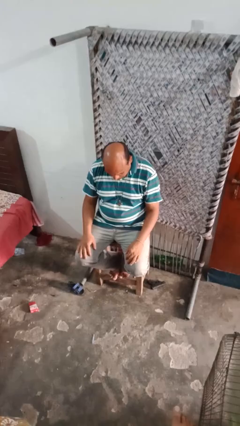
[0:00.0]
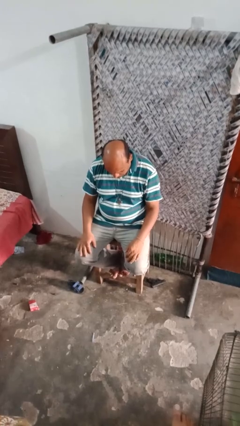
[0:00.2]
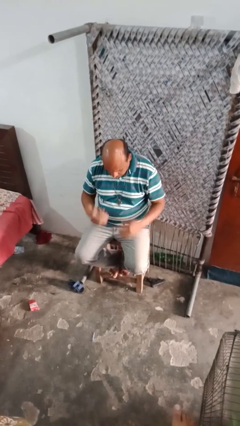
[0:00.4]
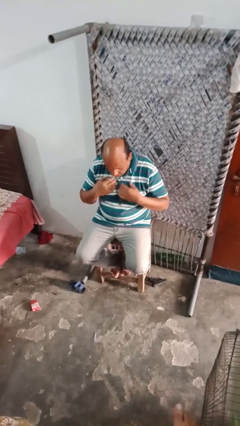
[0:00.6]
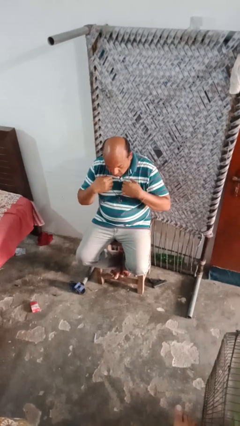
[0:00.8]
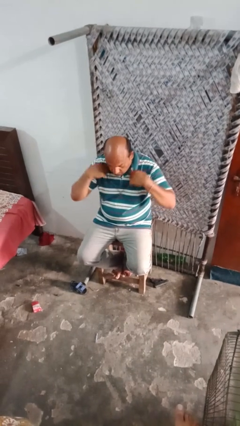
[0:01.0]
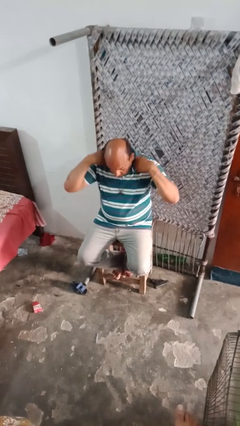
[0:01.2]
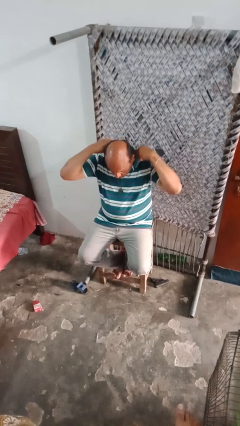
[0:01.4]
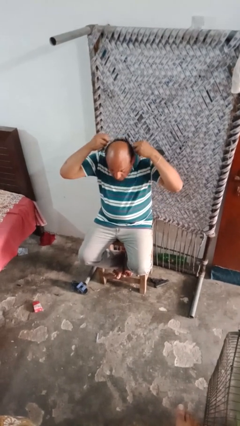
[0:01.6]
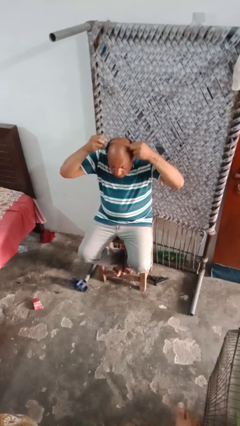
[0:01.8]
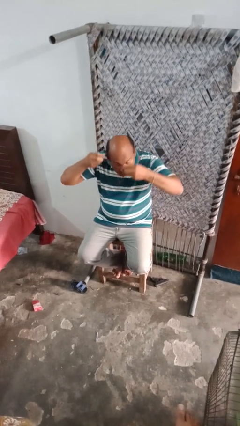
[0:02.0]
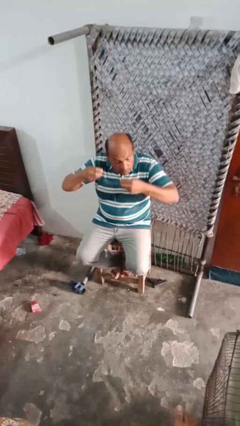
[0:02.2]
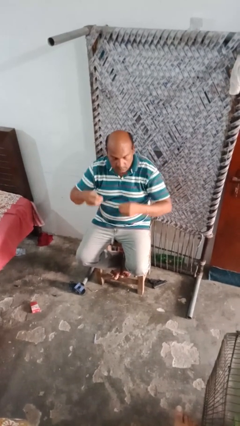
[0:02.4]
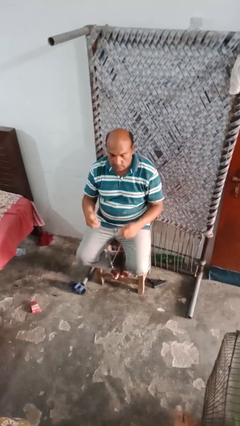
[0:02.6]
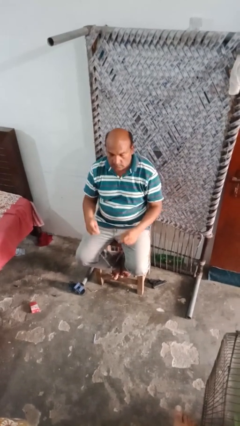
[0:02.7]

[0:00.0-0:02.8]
person takes off necklace

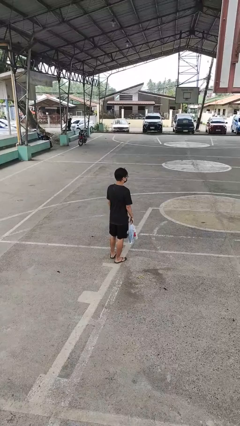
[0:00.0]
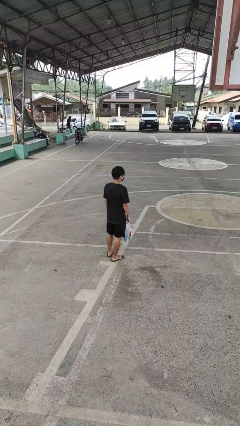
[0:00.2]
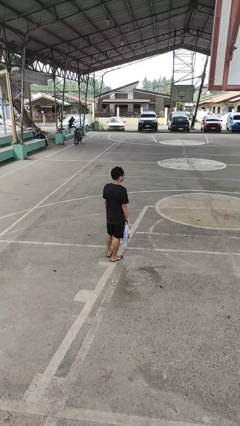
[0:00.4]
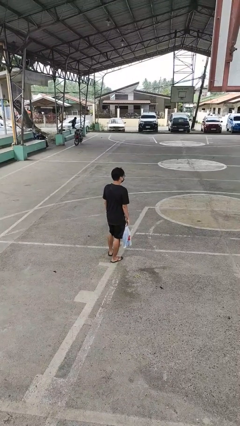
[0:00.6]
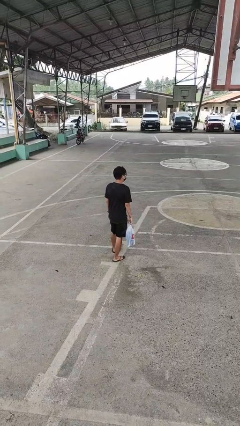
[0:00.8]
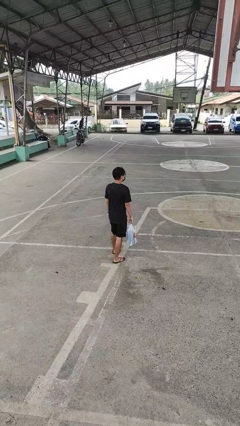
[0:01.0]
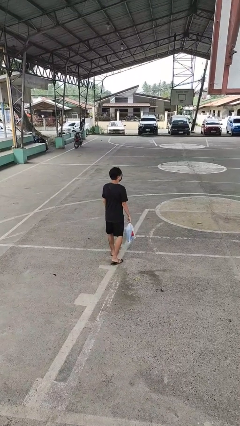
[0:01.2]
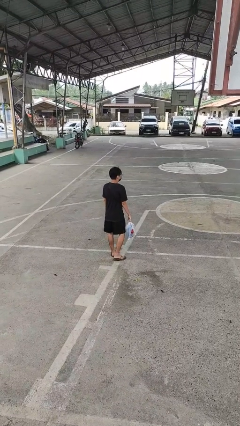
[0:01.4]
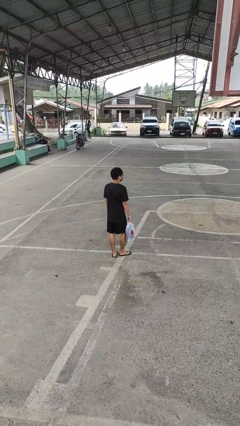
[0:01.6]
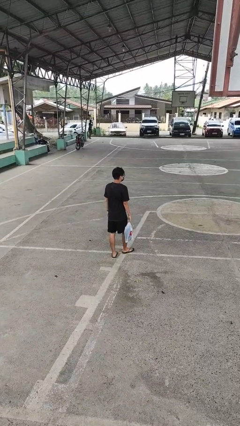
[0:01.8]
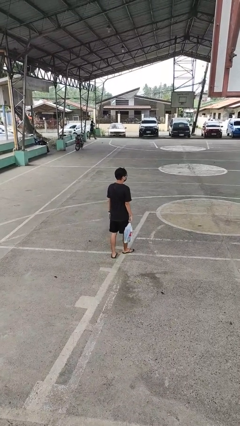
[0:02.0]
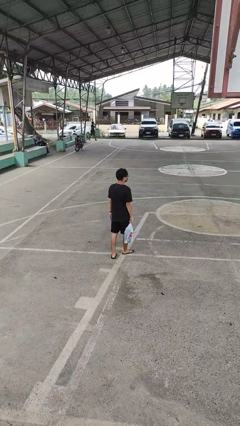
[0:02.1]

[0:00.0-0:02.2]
person carries groceries

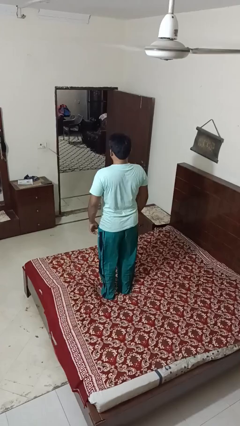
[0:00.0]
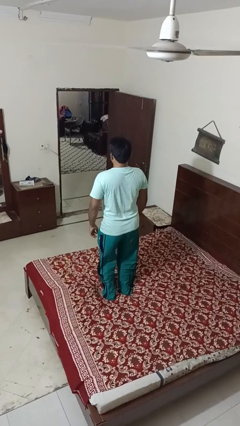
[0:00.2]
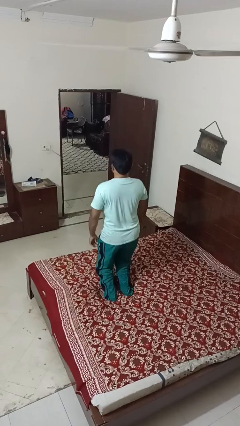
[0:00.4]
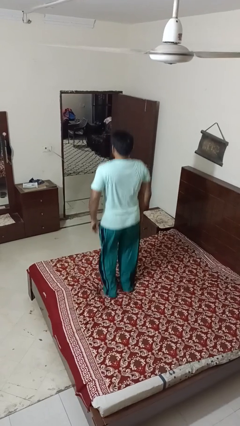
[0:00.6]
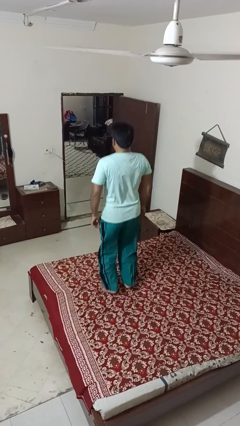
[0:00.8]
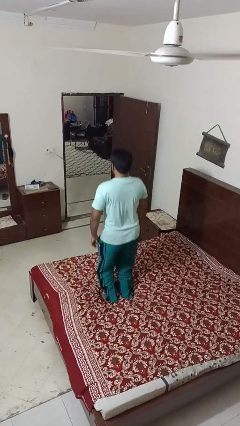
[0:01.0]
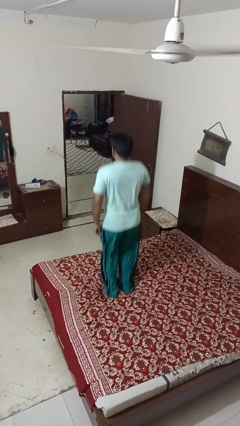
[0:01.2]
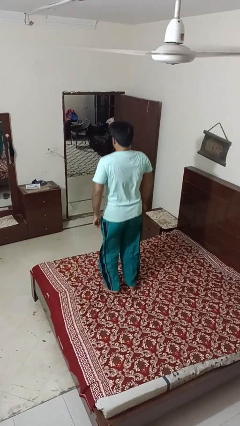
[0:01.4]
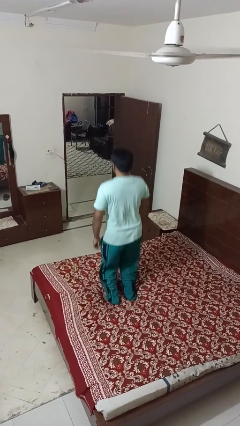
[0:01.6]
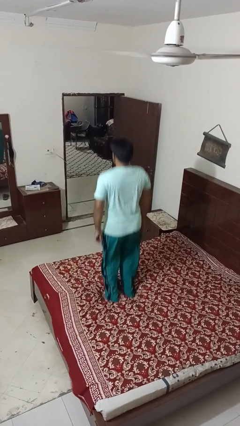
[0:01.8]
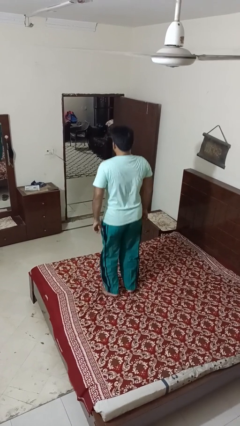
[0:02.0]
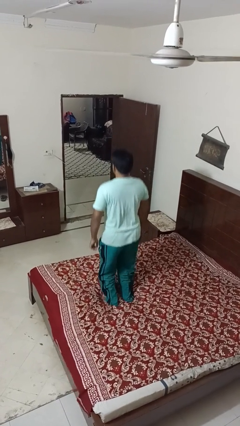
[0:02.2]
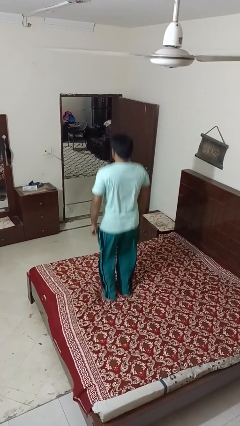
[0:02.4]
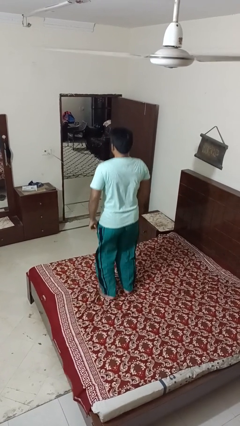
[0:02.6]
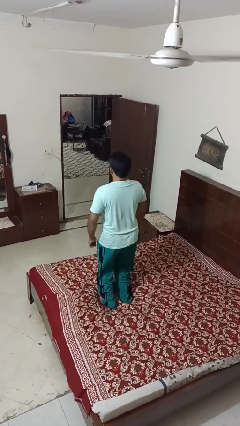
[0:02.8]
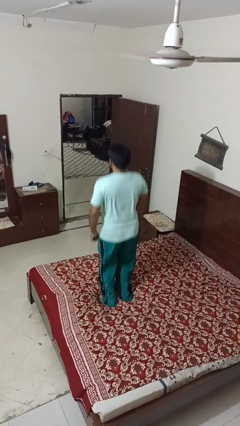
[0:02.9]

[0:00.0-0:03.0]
person jumps on bed

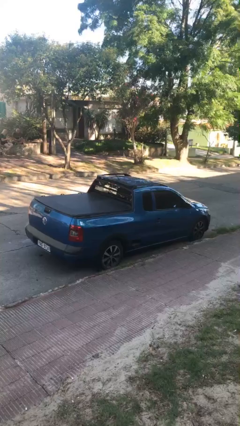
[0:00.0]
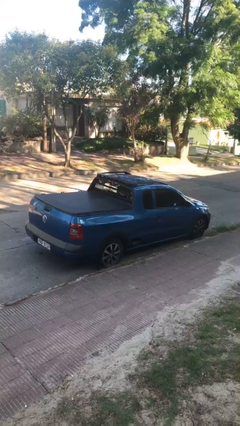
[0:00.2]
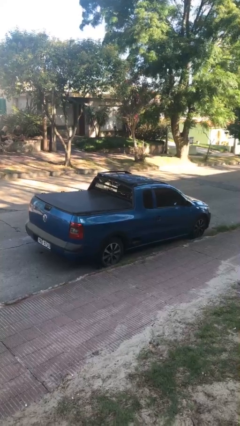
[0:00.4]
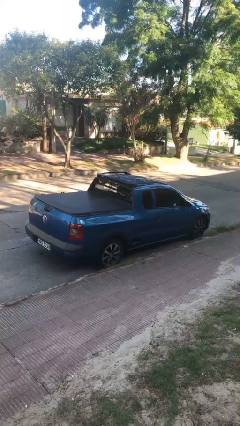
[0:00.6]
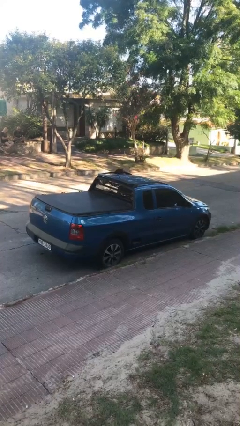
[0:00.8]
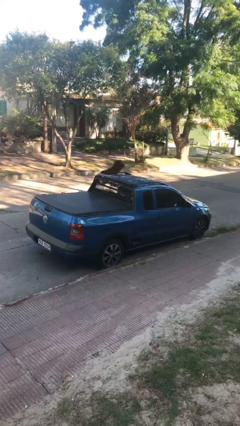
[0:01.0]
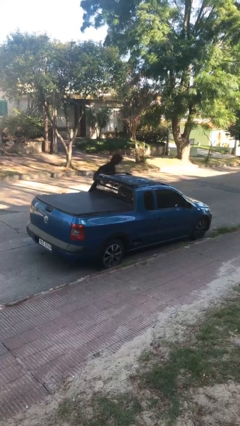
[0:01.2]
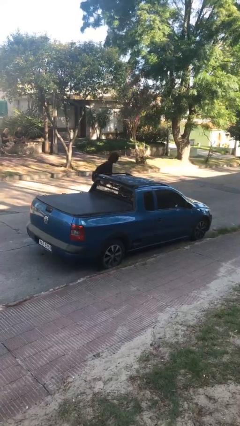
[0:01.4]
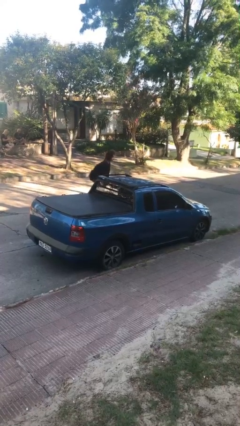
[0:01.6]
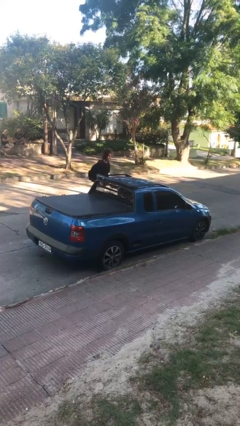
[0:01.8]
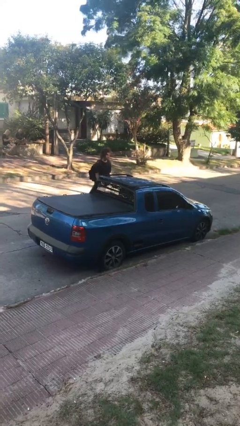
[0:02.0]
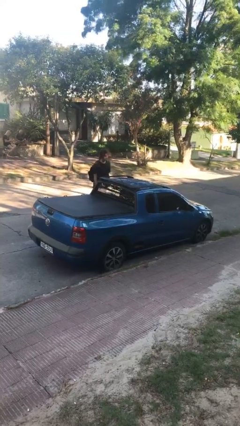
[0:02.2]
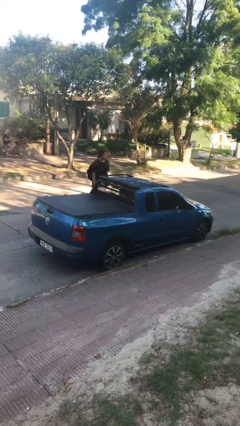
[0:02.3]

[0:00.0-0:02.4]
car drops off person

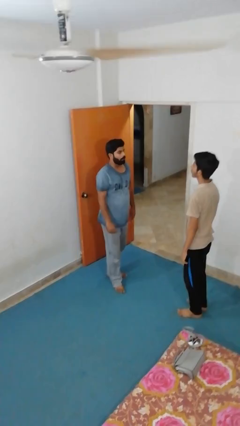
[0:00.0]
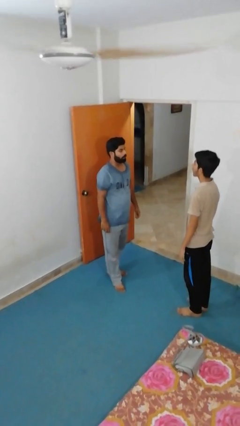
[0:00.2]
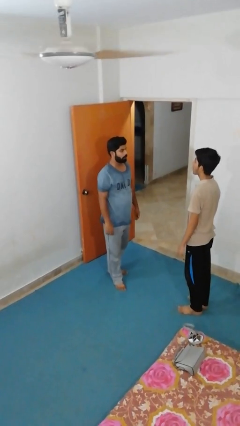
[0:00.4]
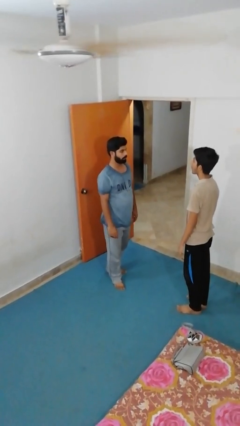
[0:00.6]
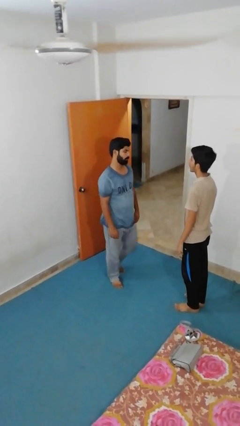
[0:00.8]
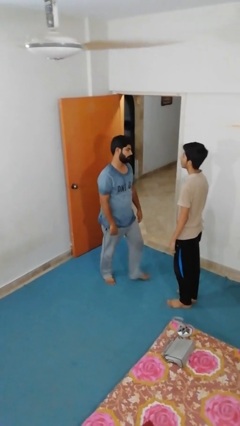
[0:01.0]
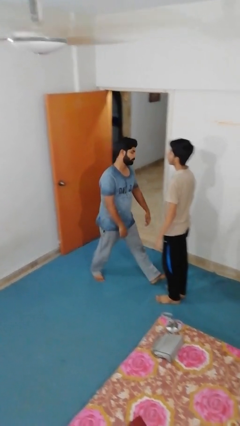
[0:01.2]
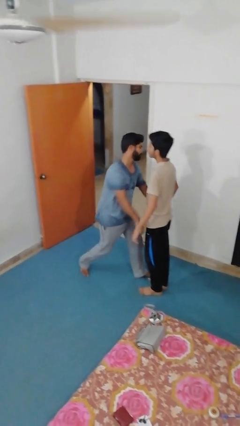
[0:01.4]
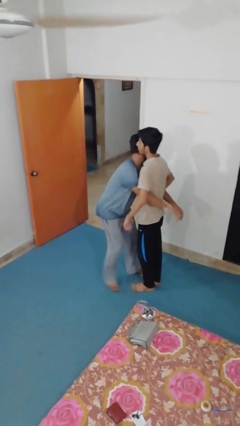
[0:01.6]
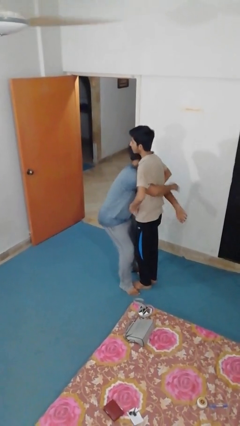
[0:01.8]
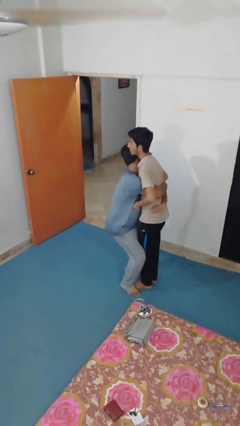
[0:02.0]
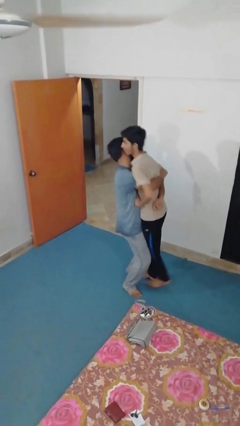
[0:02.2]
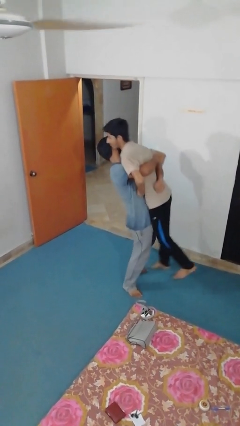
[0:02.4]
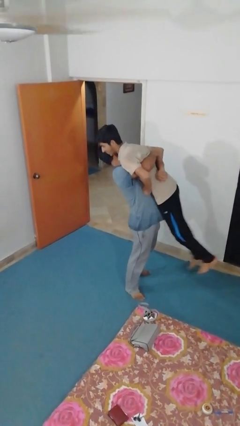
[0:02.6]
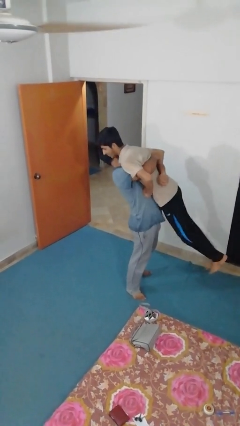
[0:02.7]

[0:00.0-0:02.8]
person picks up person

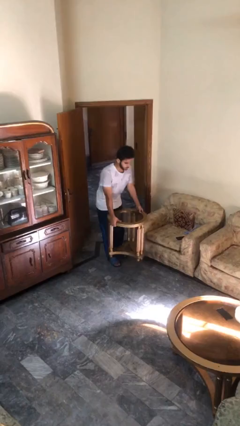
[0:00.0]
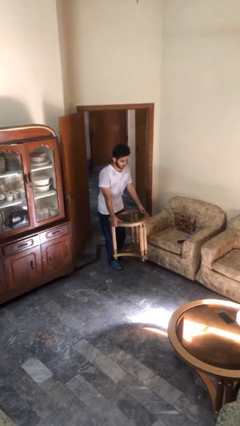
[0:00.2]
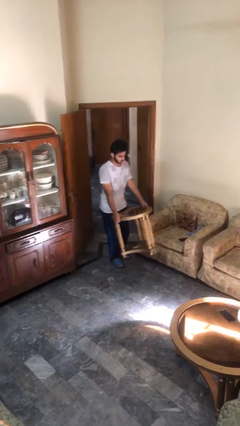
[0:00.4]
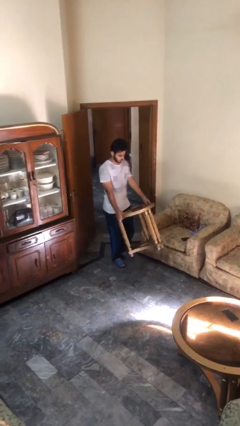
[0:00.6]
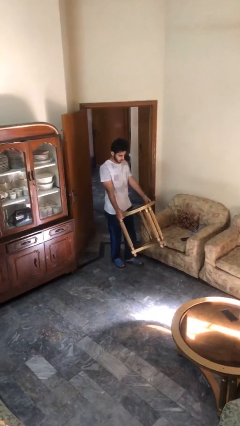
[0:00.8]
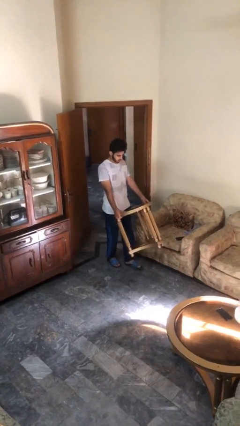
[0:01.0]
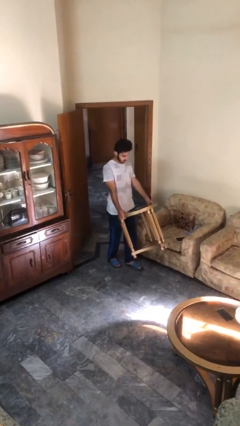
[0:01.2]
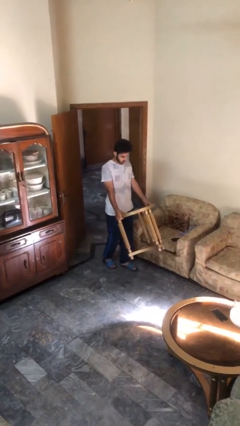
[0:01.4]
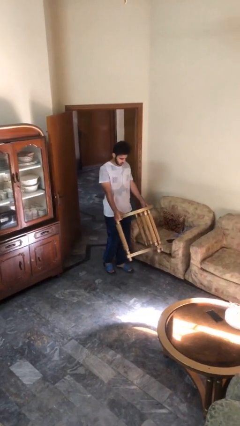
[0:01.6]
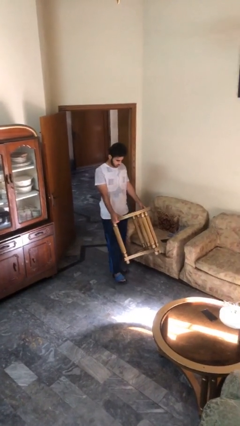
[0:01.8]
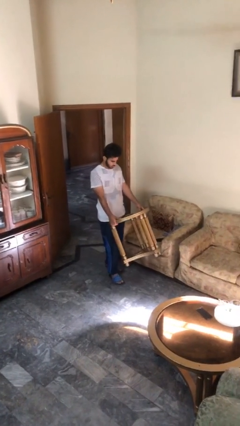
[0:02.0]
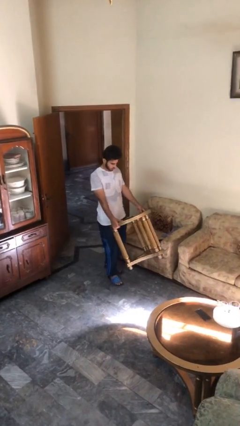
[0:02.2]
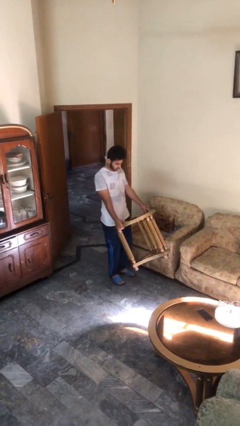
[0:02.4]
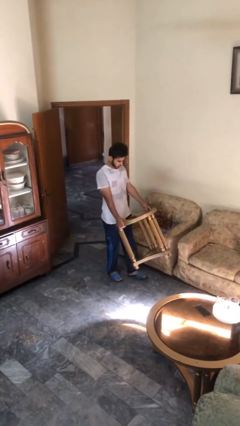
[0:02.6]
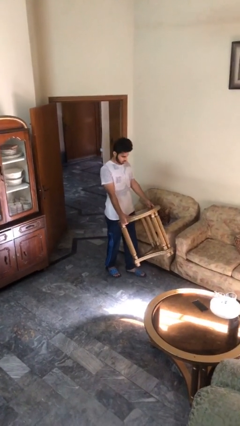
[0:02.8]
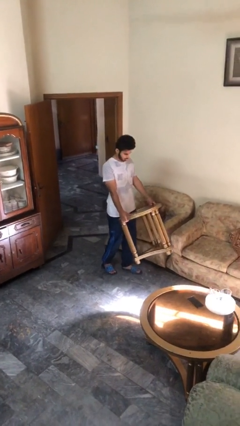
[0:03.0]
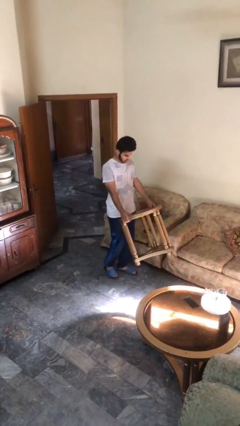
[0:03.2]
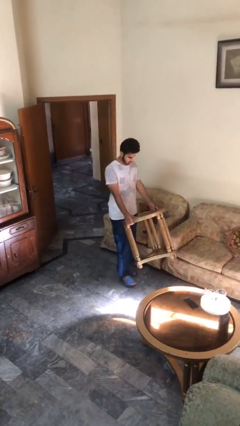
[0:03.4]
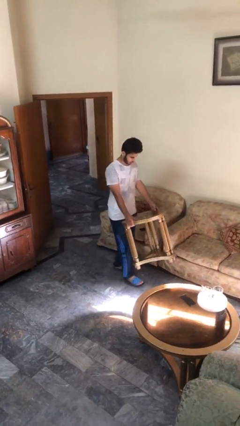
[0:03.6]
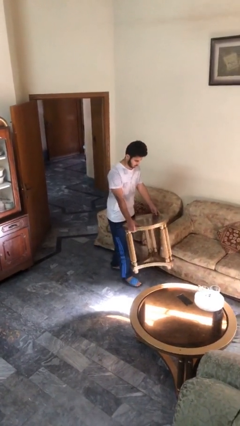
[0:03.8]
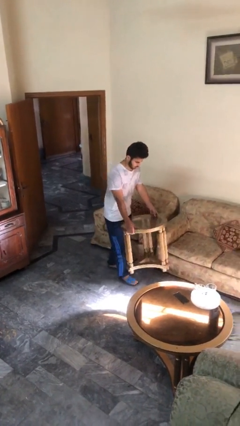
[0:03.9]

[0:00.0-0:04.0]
person carries heavy object
